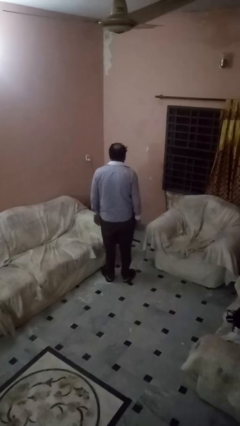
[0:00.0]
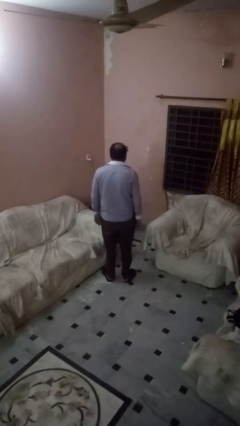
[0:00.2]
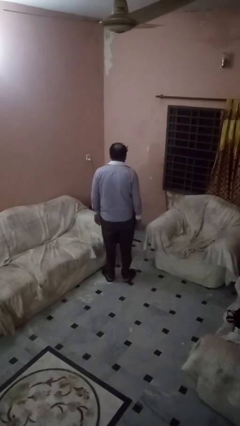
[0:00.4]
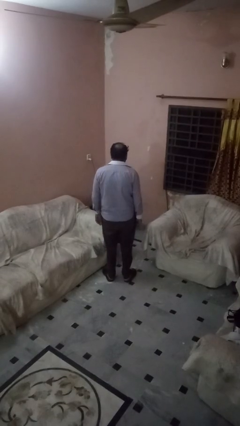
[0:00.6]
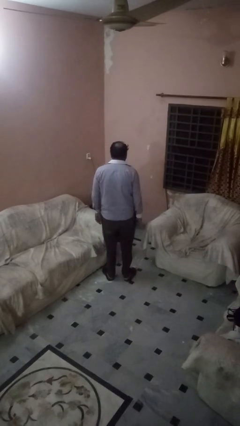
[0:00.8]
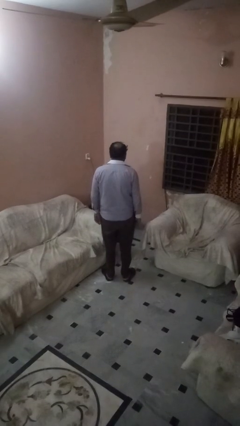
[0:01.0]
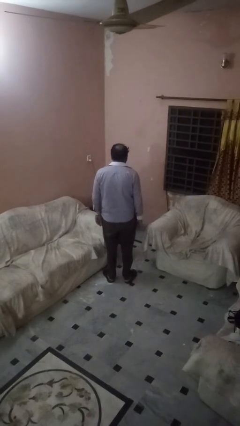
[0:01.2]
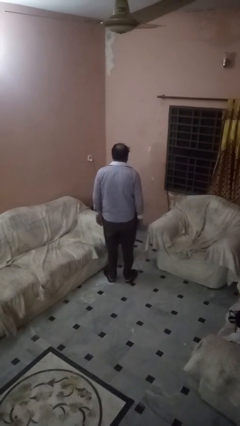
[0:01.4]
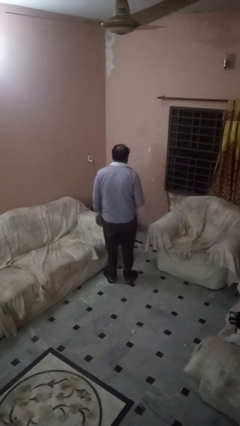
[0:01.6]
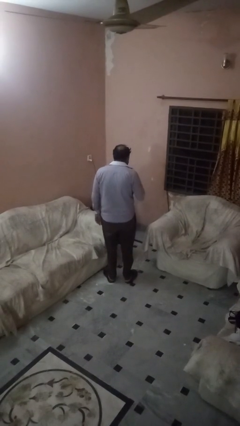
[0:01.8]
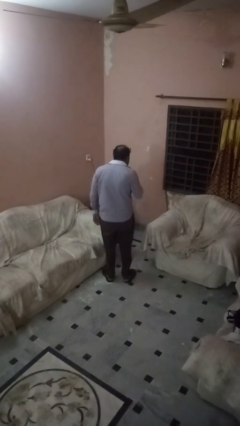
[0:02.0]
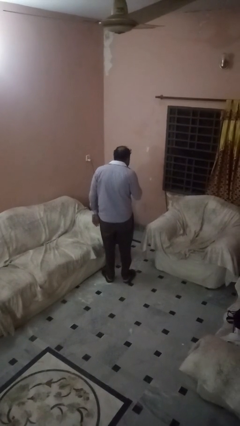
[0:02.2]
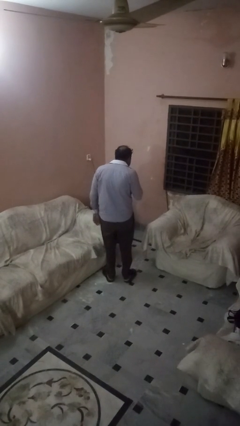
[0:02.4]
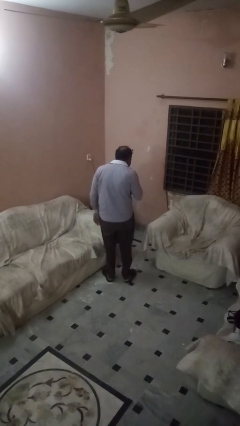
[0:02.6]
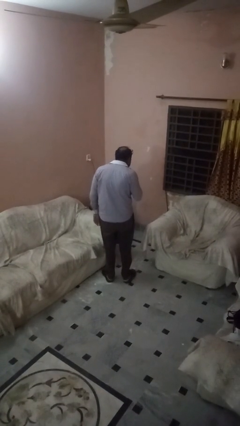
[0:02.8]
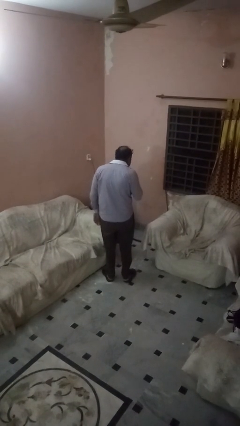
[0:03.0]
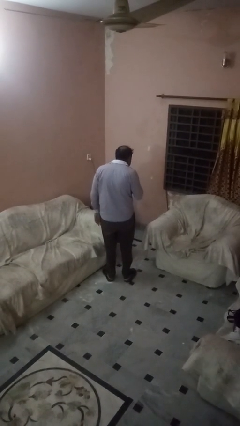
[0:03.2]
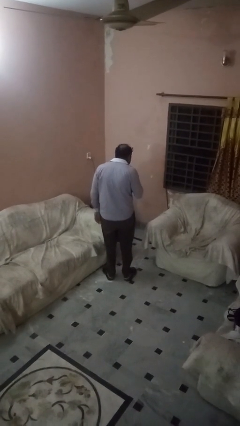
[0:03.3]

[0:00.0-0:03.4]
person gestures be quiet

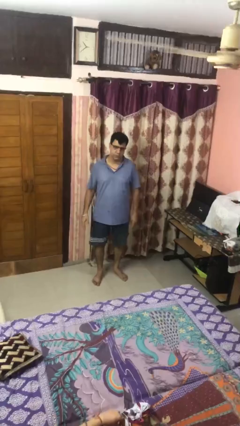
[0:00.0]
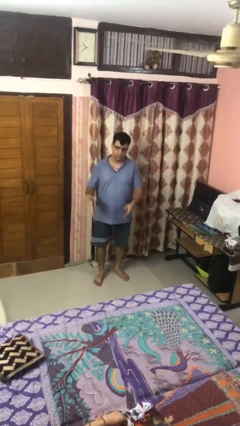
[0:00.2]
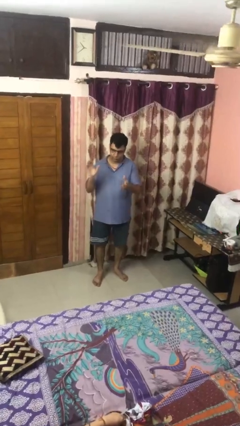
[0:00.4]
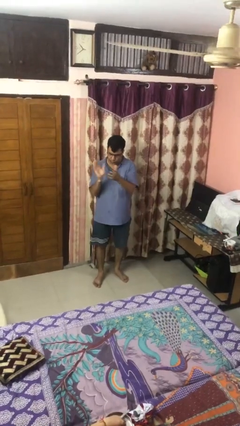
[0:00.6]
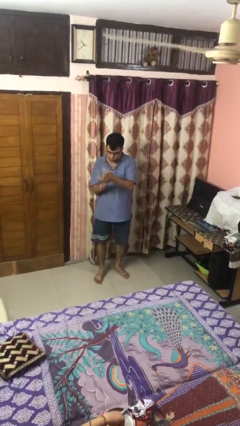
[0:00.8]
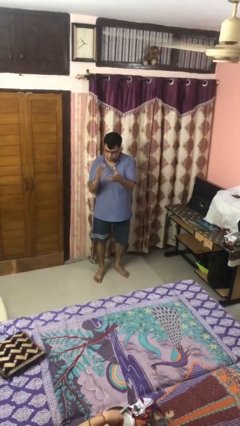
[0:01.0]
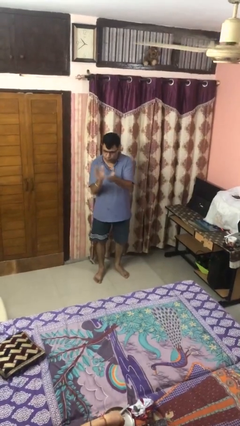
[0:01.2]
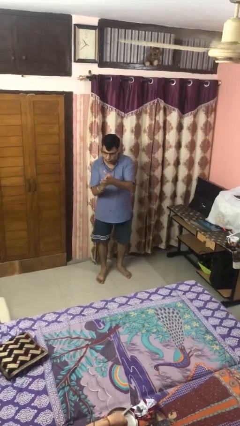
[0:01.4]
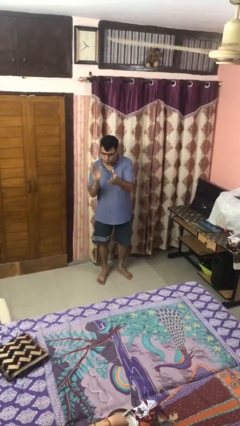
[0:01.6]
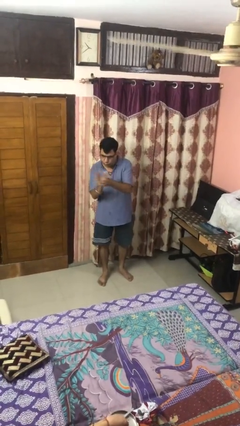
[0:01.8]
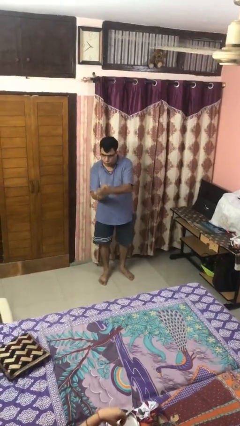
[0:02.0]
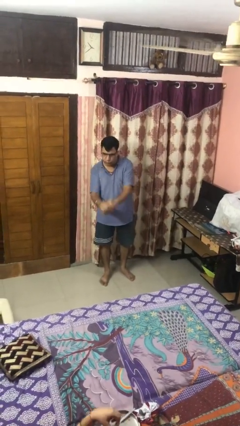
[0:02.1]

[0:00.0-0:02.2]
person claps hands

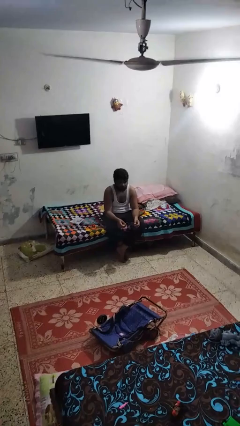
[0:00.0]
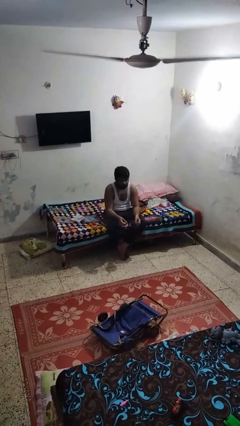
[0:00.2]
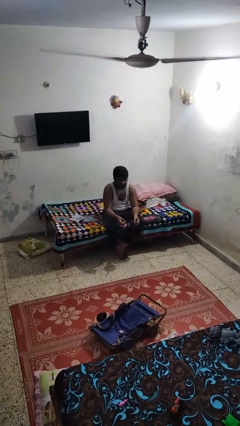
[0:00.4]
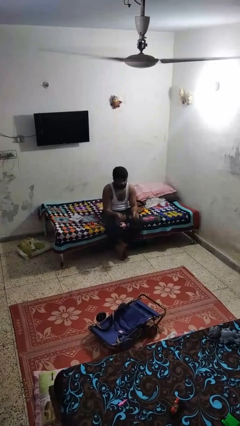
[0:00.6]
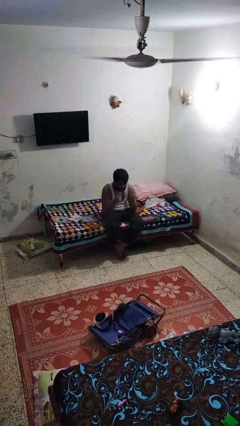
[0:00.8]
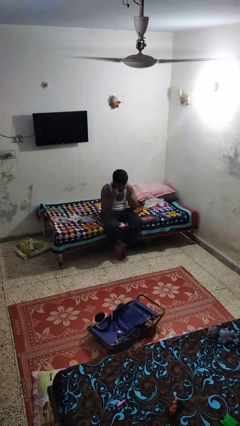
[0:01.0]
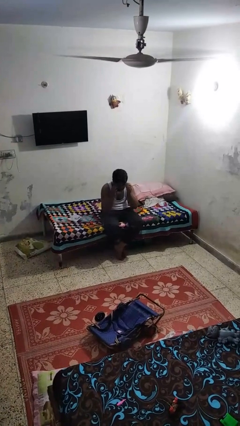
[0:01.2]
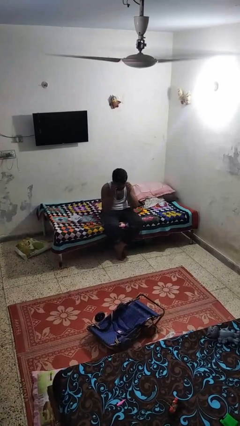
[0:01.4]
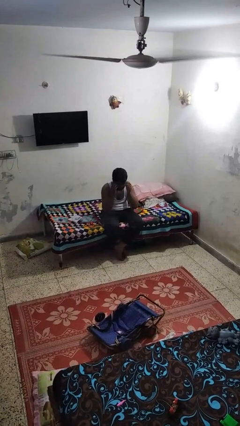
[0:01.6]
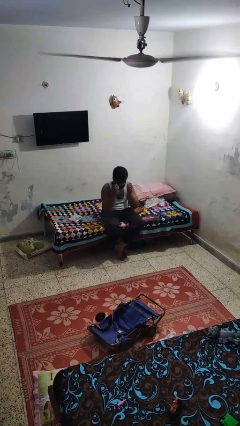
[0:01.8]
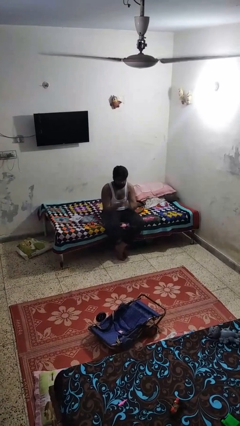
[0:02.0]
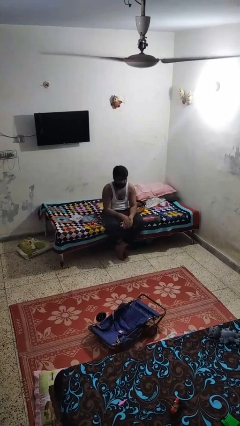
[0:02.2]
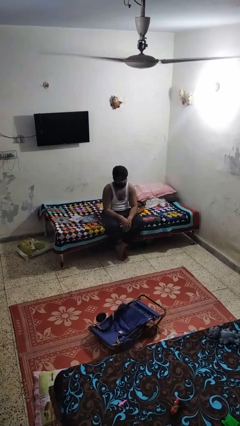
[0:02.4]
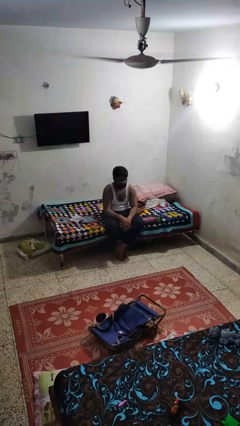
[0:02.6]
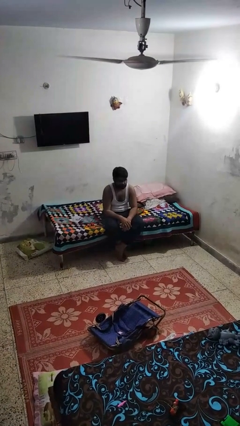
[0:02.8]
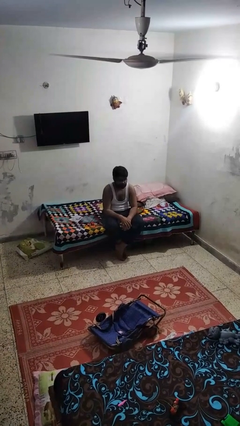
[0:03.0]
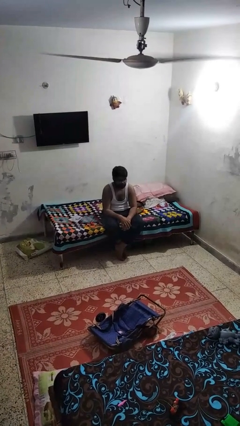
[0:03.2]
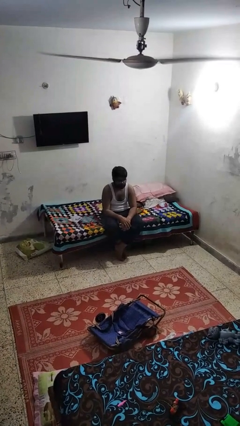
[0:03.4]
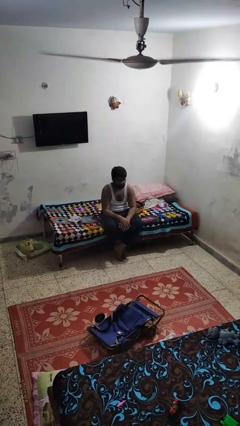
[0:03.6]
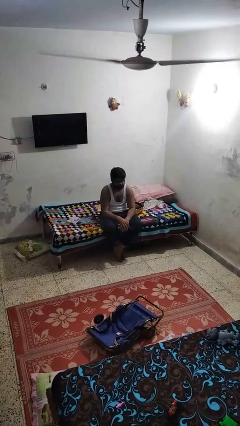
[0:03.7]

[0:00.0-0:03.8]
person puts on glasses

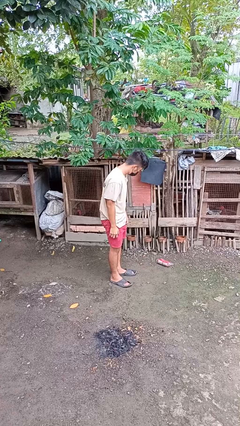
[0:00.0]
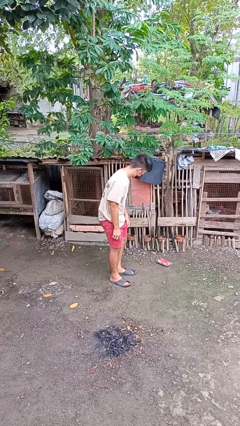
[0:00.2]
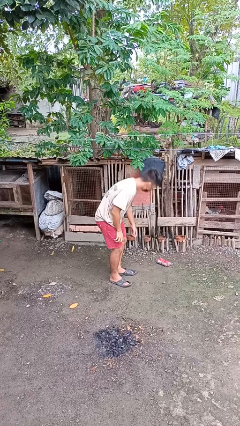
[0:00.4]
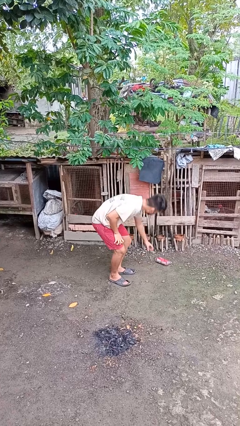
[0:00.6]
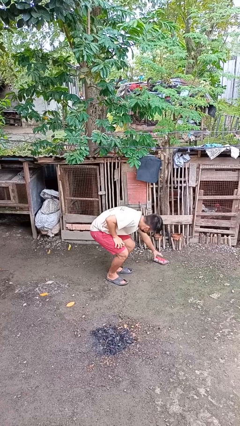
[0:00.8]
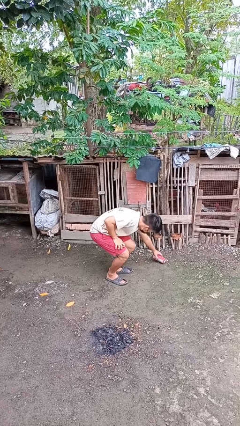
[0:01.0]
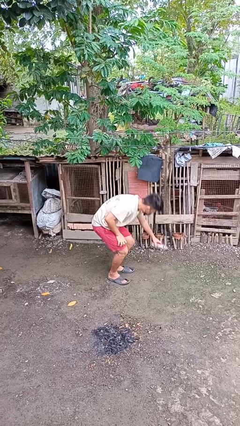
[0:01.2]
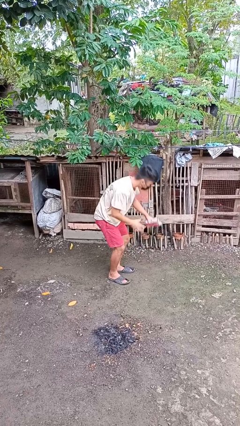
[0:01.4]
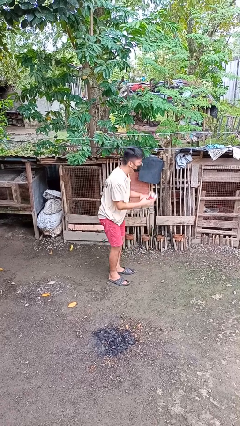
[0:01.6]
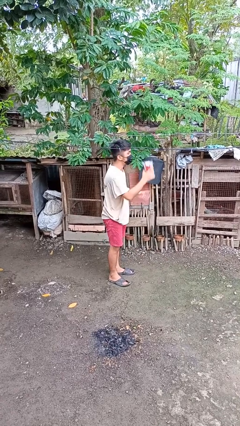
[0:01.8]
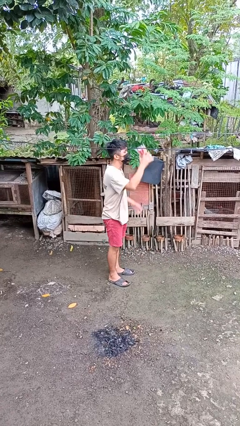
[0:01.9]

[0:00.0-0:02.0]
person picks up object from floor

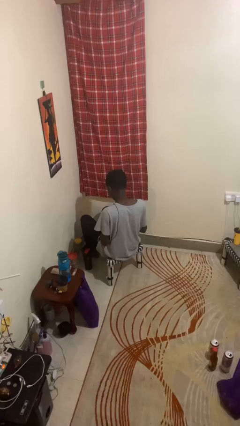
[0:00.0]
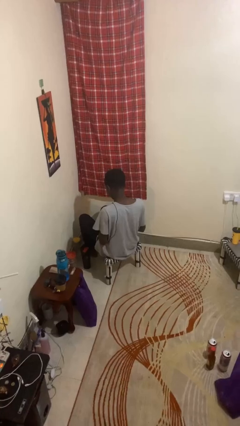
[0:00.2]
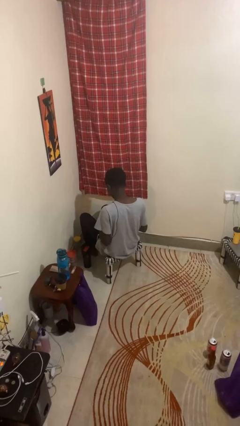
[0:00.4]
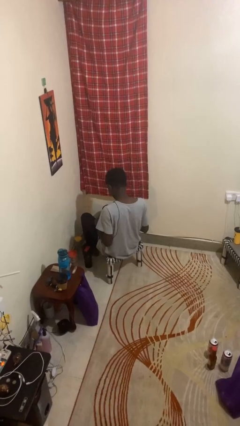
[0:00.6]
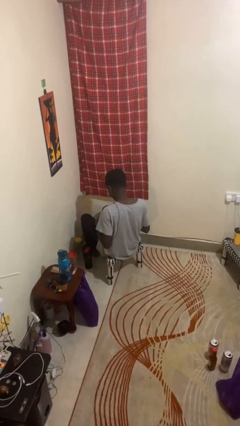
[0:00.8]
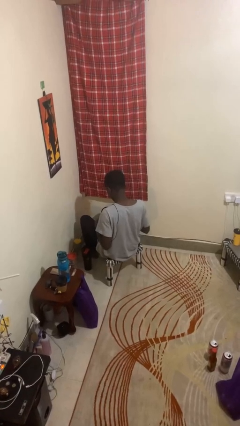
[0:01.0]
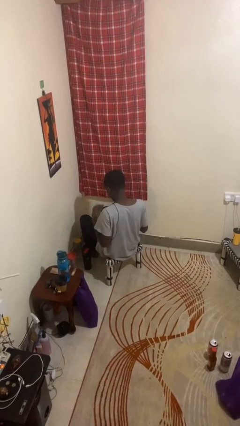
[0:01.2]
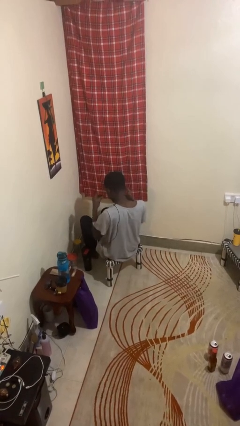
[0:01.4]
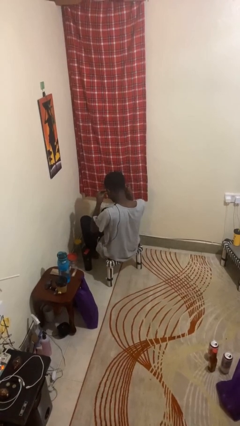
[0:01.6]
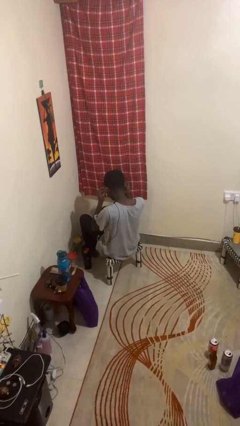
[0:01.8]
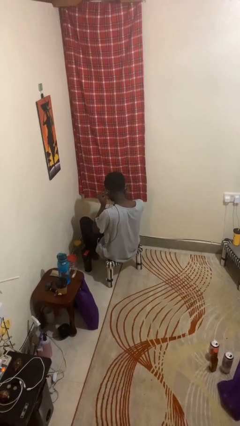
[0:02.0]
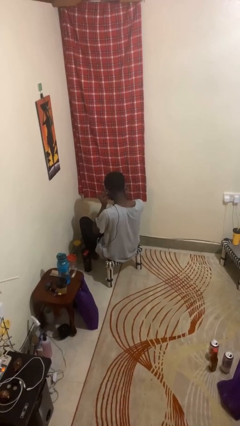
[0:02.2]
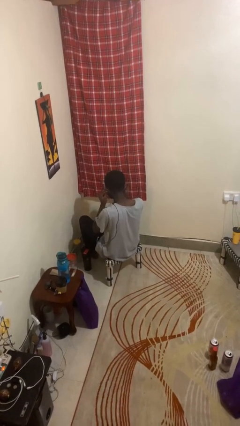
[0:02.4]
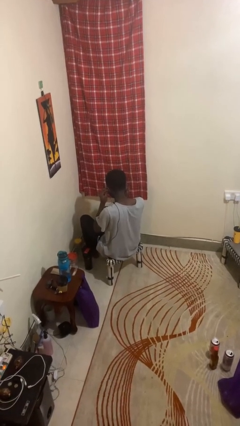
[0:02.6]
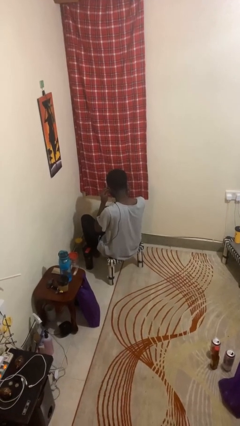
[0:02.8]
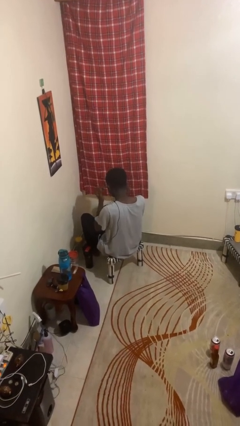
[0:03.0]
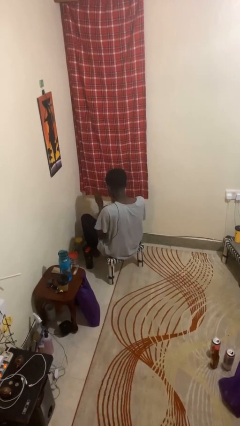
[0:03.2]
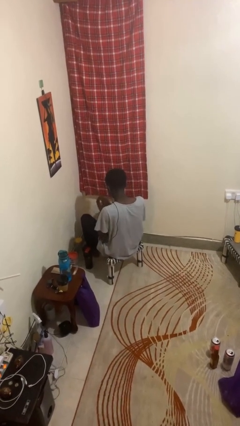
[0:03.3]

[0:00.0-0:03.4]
person puts on headphones

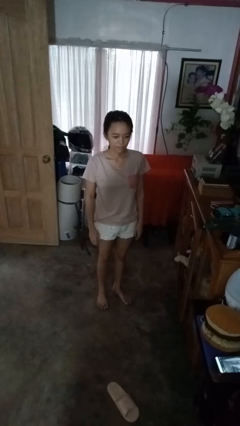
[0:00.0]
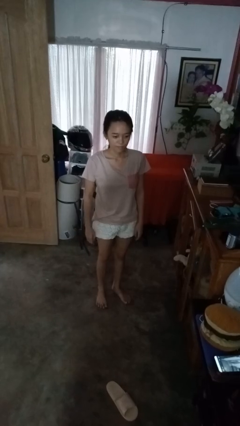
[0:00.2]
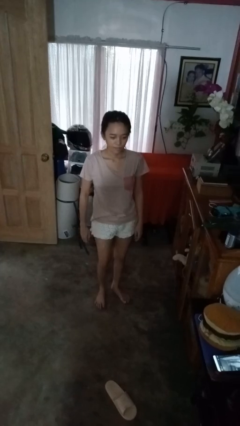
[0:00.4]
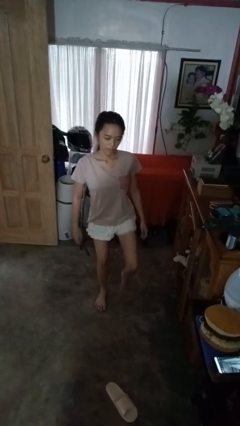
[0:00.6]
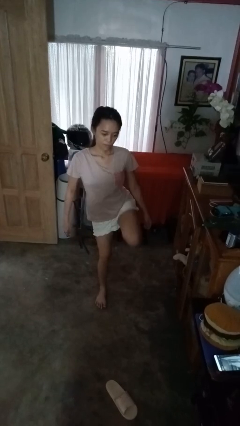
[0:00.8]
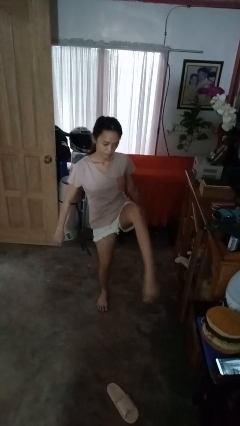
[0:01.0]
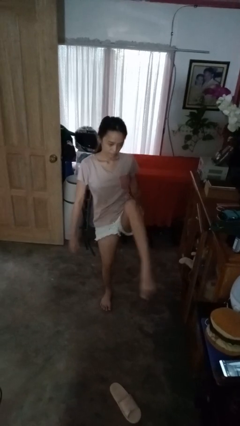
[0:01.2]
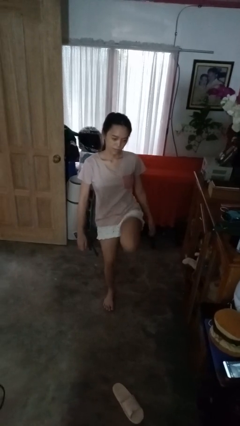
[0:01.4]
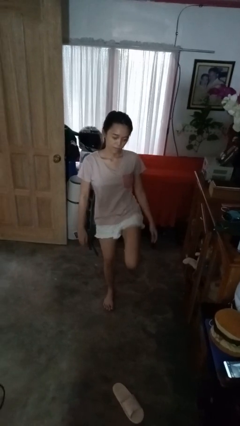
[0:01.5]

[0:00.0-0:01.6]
person karate kicks

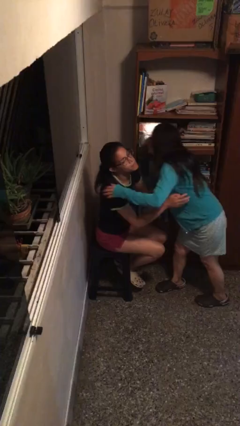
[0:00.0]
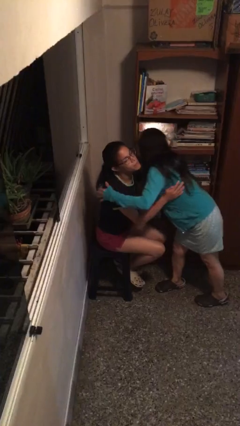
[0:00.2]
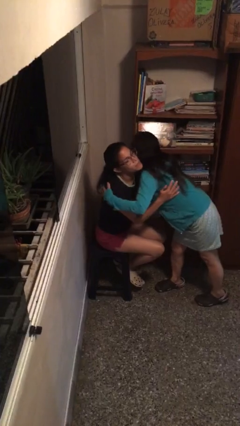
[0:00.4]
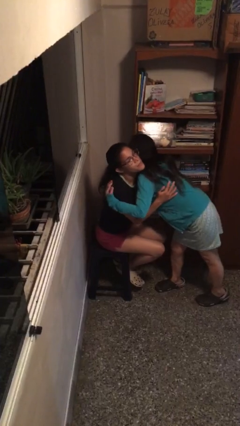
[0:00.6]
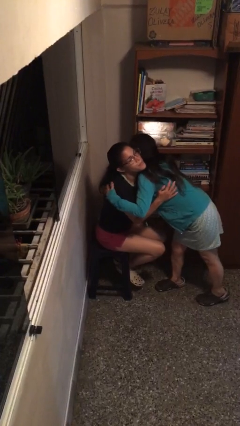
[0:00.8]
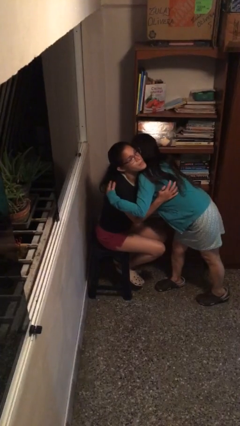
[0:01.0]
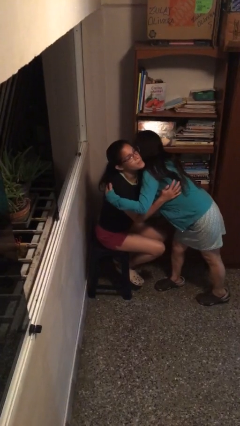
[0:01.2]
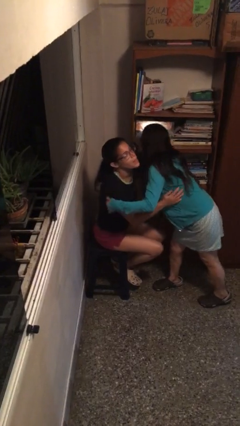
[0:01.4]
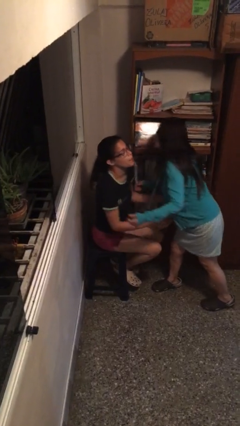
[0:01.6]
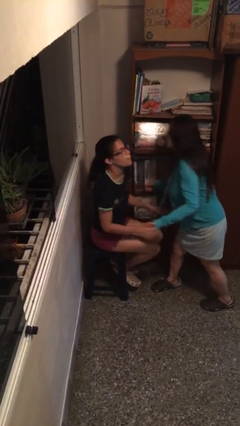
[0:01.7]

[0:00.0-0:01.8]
person embraces person
